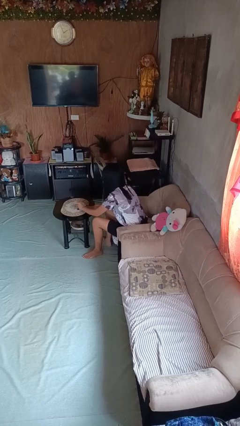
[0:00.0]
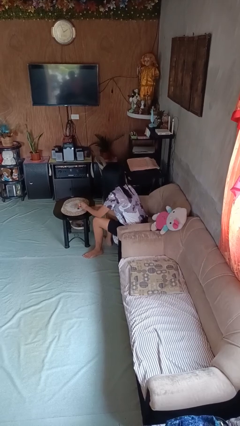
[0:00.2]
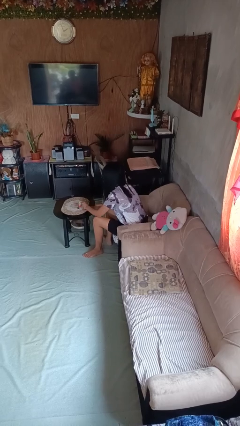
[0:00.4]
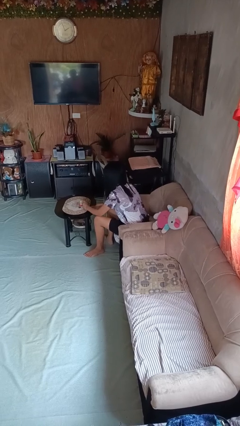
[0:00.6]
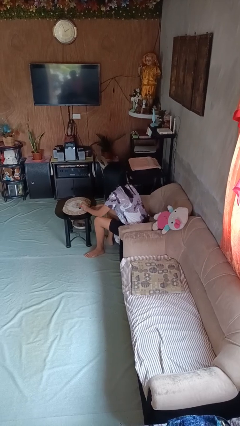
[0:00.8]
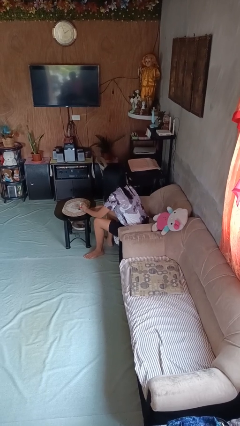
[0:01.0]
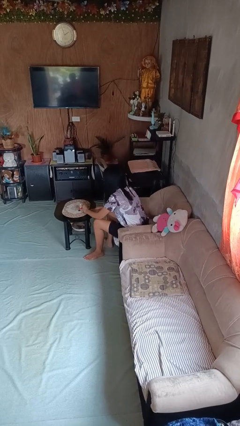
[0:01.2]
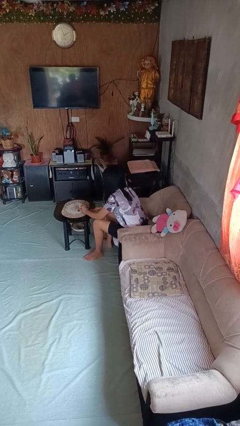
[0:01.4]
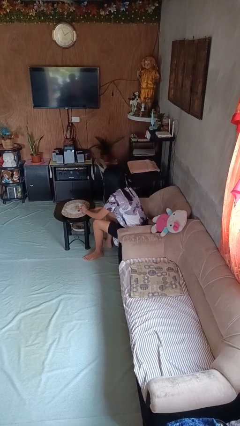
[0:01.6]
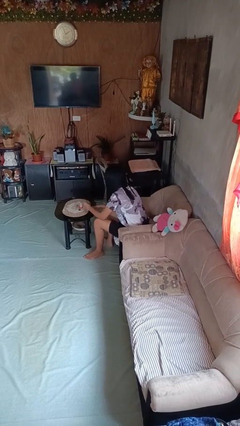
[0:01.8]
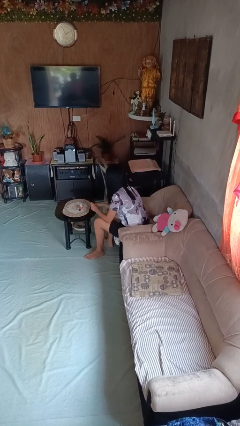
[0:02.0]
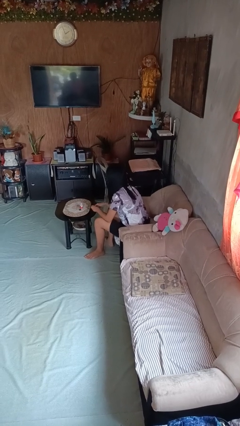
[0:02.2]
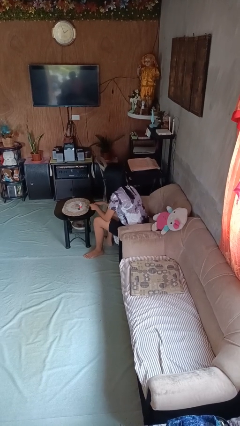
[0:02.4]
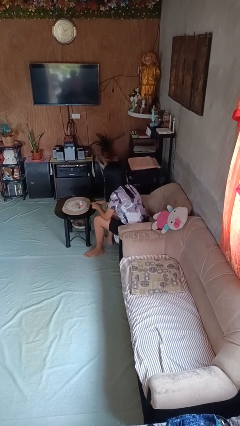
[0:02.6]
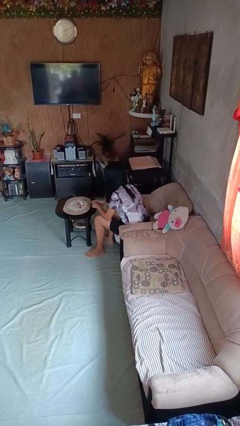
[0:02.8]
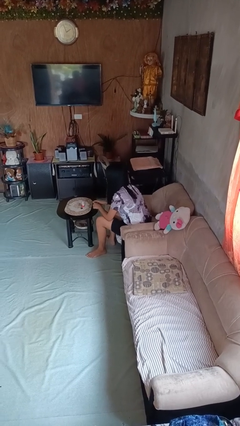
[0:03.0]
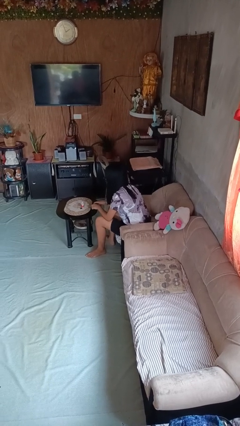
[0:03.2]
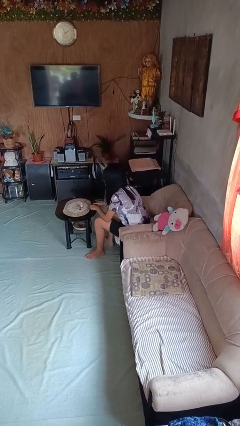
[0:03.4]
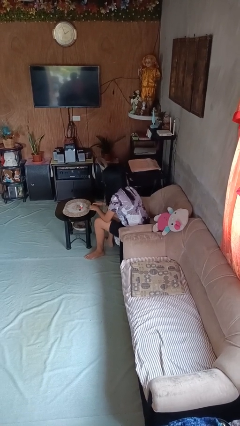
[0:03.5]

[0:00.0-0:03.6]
person paints fingernails

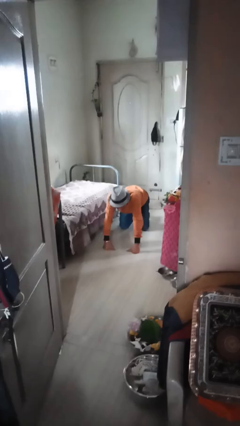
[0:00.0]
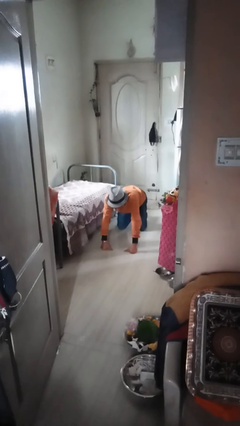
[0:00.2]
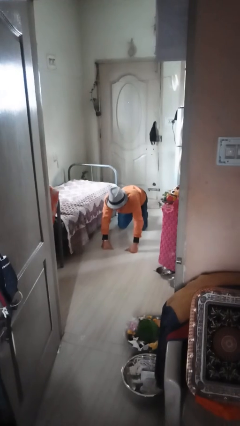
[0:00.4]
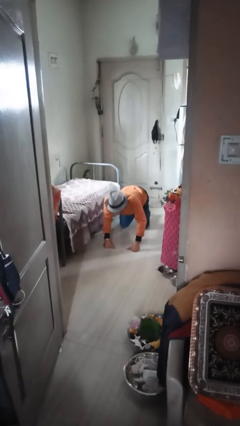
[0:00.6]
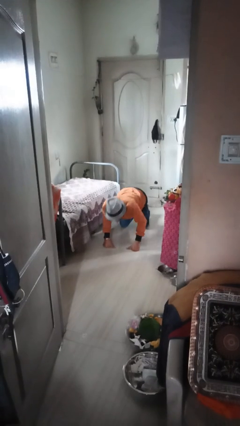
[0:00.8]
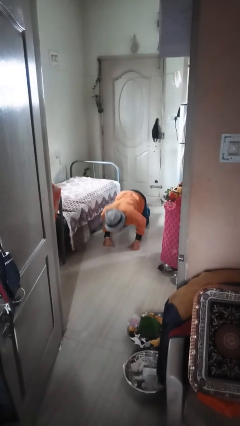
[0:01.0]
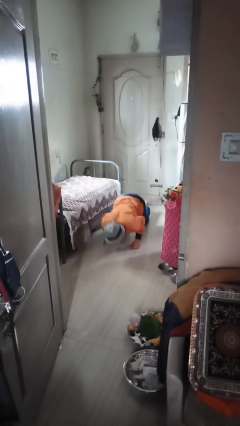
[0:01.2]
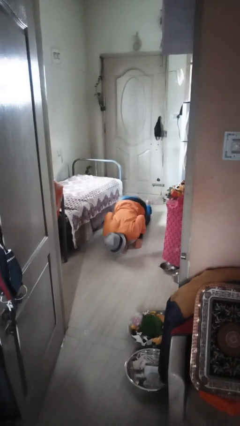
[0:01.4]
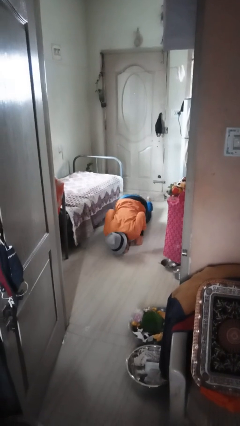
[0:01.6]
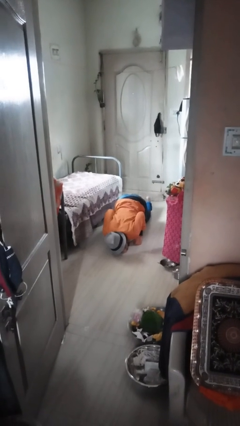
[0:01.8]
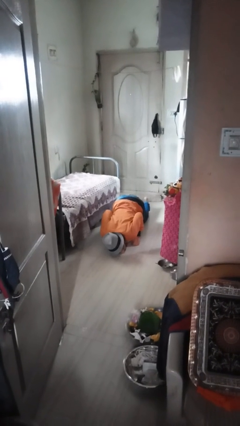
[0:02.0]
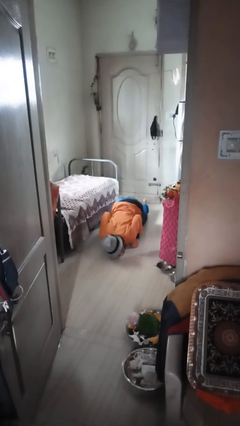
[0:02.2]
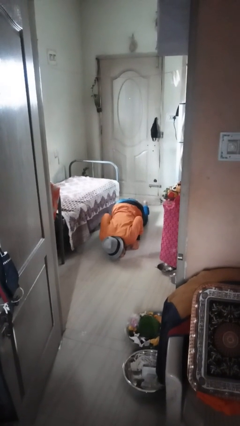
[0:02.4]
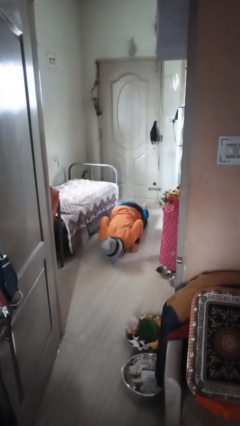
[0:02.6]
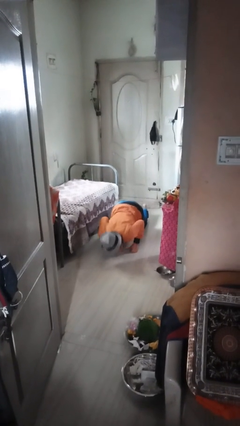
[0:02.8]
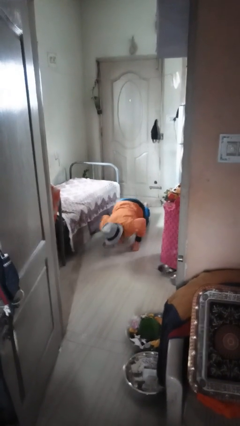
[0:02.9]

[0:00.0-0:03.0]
person exercises with pushup

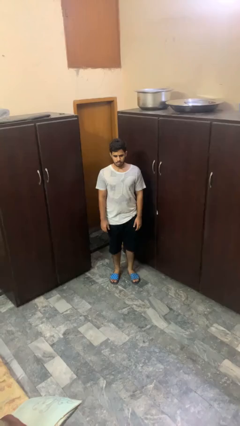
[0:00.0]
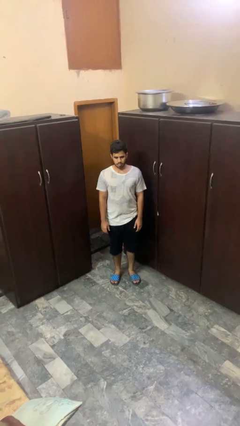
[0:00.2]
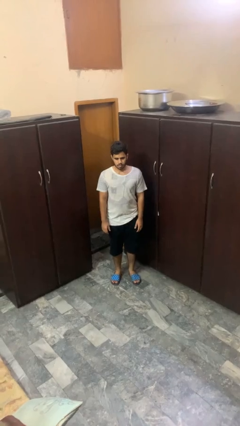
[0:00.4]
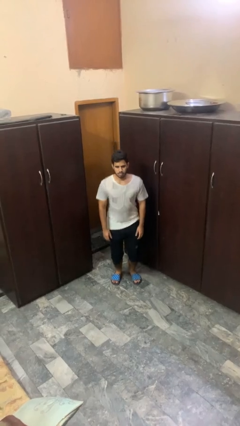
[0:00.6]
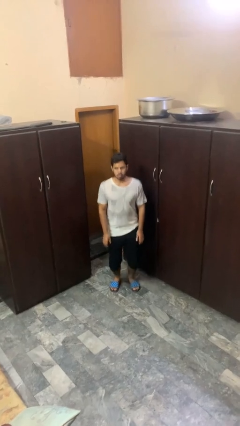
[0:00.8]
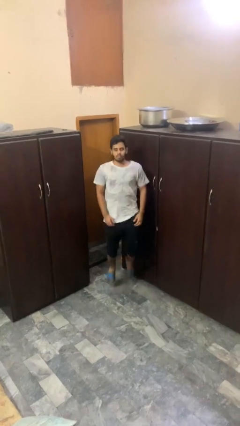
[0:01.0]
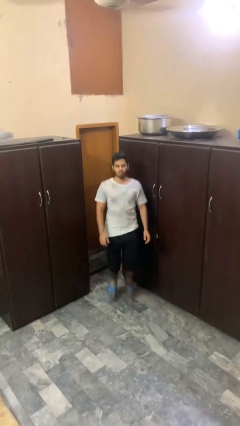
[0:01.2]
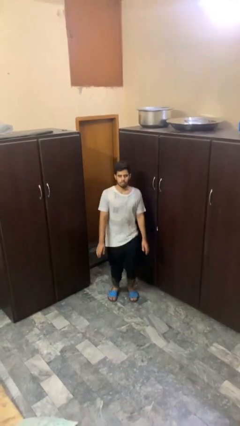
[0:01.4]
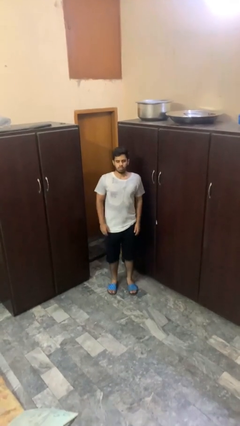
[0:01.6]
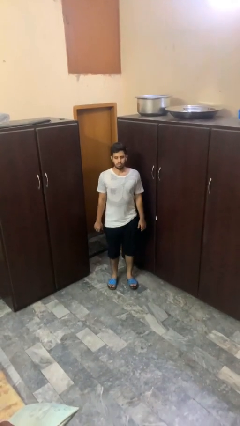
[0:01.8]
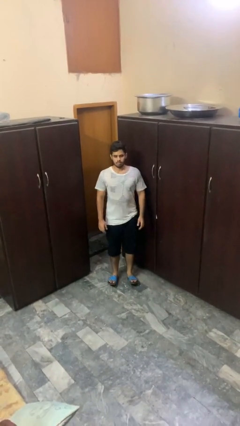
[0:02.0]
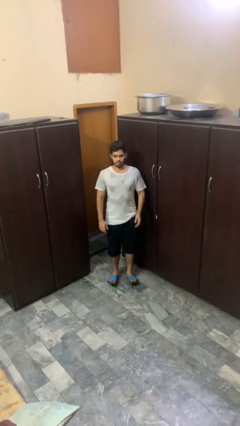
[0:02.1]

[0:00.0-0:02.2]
person jumps

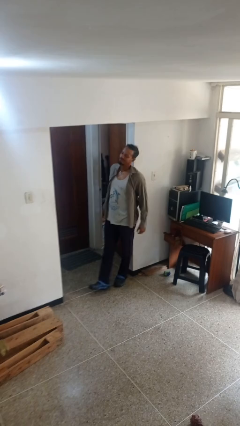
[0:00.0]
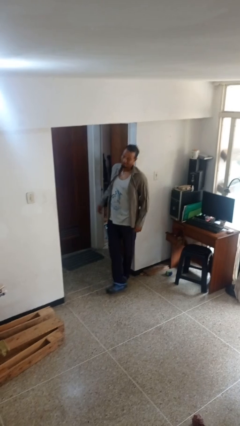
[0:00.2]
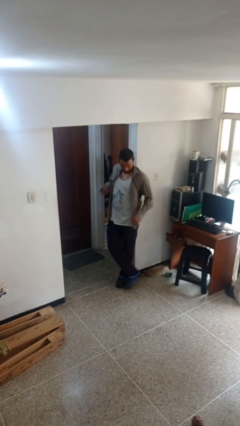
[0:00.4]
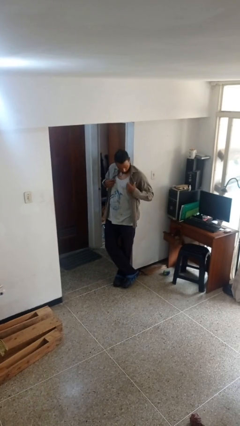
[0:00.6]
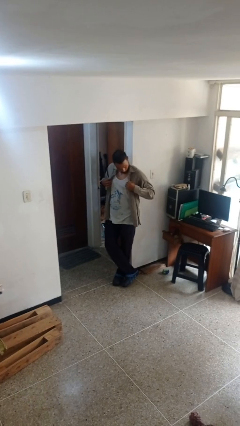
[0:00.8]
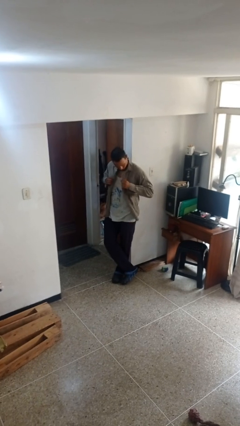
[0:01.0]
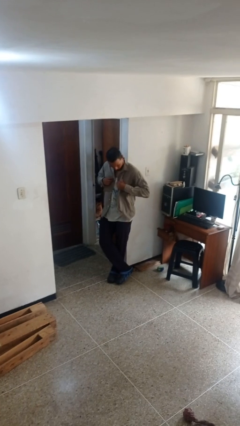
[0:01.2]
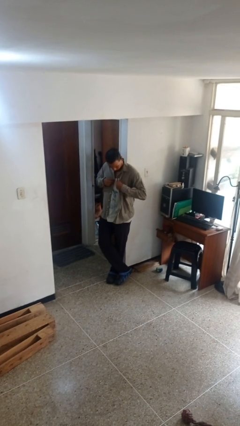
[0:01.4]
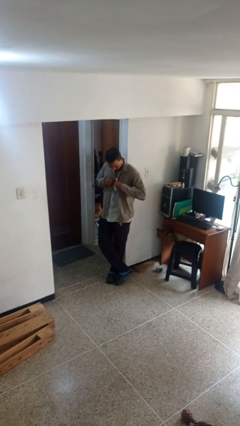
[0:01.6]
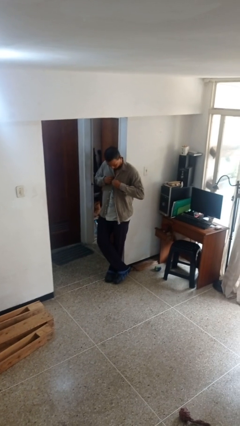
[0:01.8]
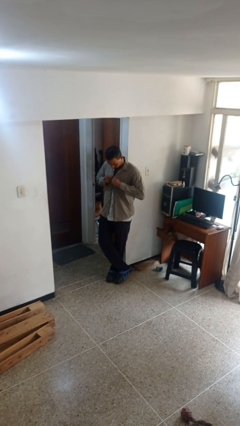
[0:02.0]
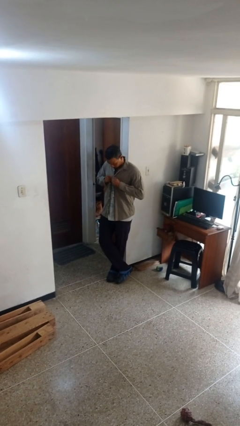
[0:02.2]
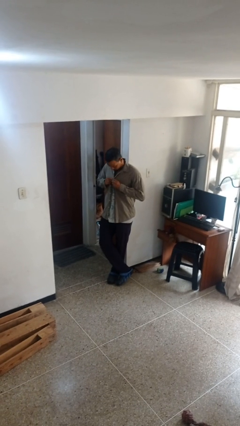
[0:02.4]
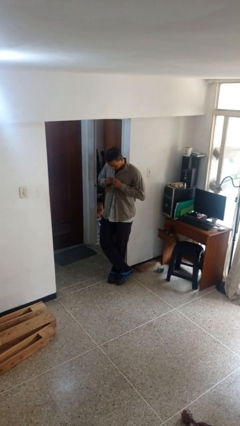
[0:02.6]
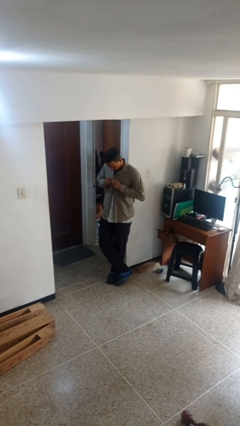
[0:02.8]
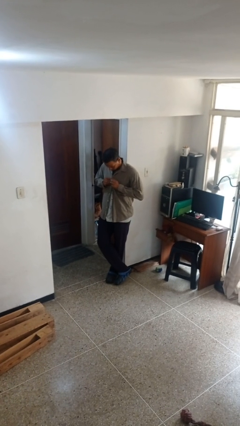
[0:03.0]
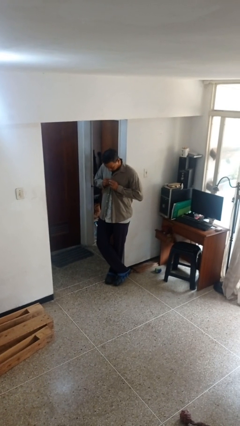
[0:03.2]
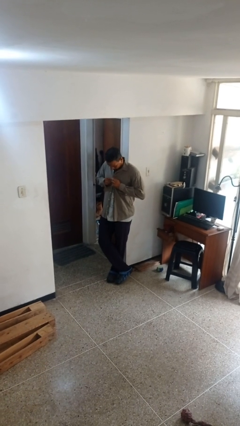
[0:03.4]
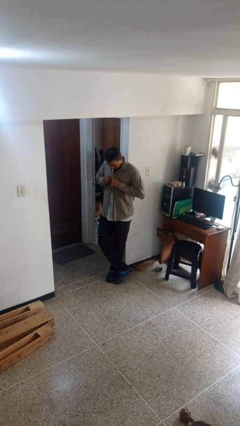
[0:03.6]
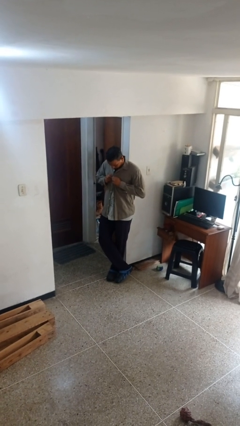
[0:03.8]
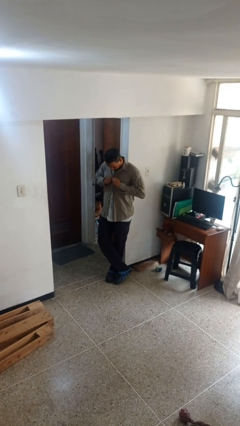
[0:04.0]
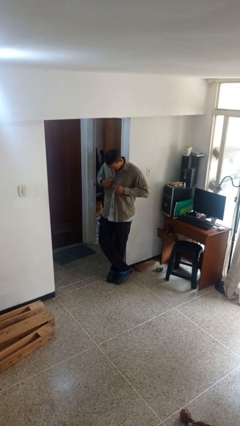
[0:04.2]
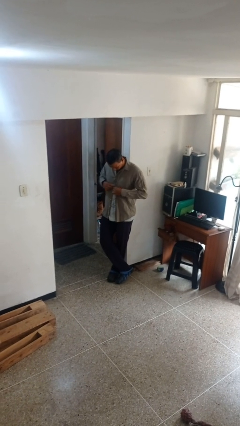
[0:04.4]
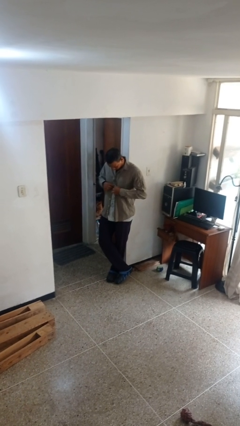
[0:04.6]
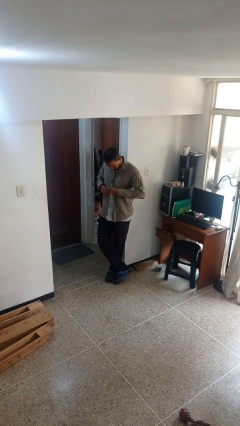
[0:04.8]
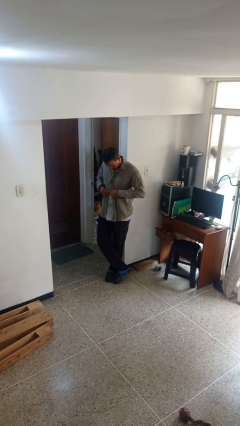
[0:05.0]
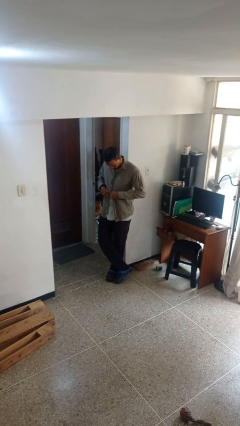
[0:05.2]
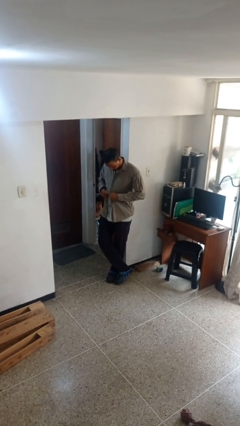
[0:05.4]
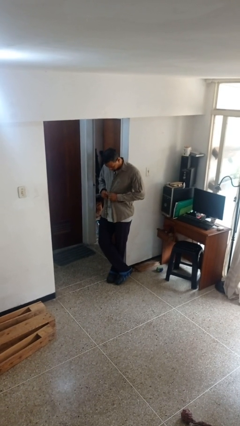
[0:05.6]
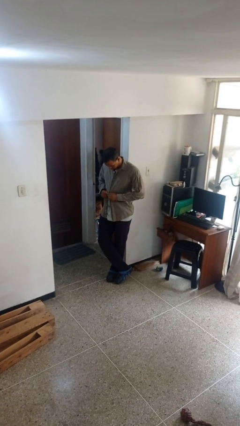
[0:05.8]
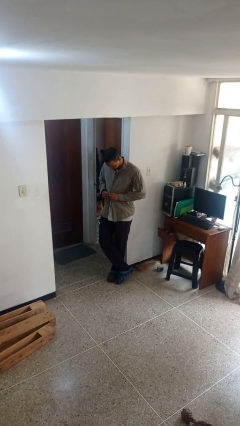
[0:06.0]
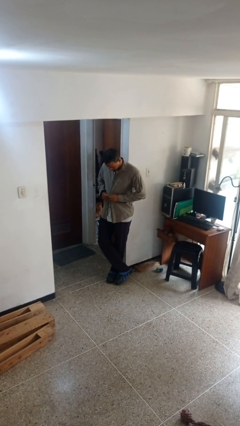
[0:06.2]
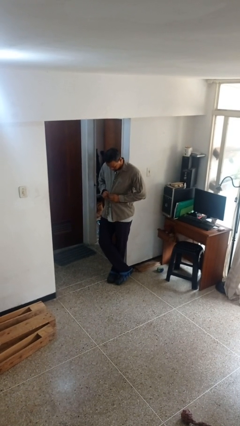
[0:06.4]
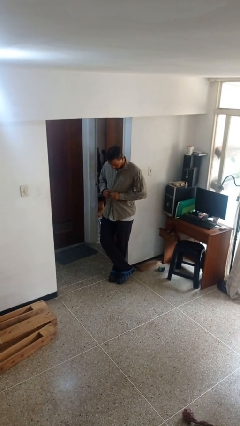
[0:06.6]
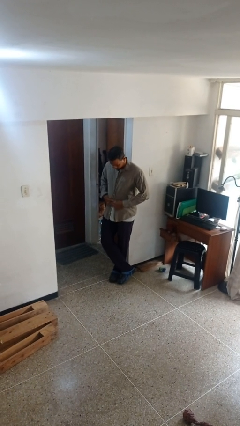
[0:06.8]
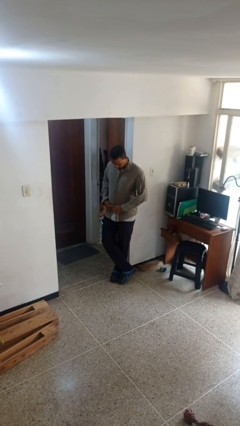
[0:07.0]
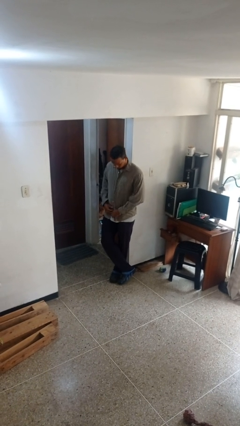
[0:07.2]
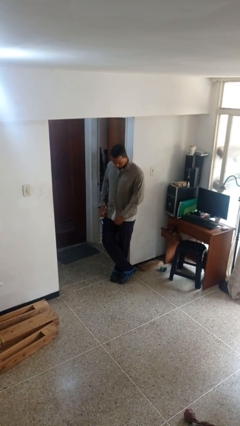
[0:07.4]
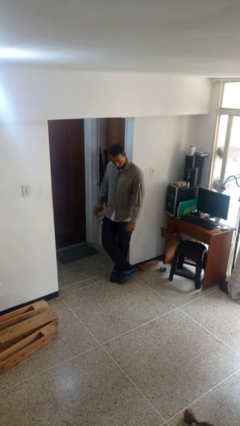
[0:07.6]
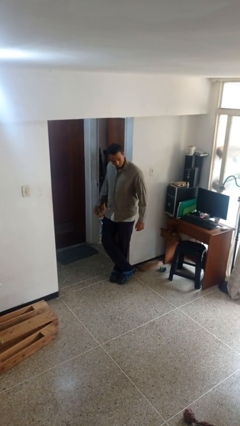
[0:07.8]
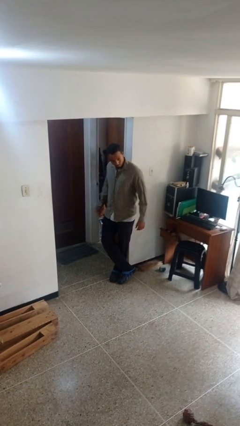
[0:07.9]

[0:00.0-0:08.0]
person buttons shirt

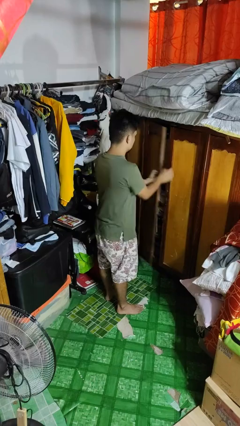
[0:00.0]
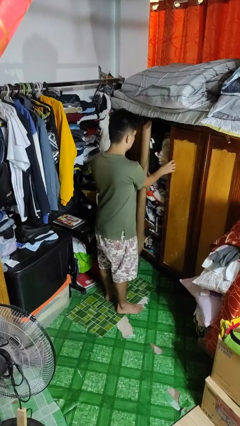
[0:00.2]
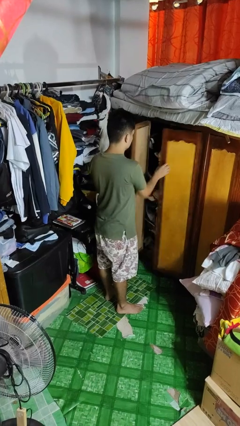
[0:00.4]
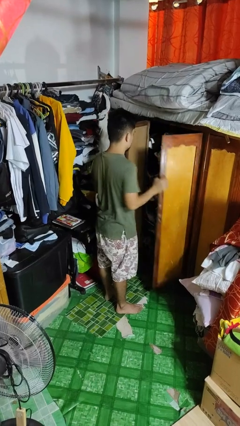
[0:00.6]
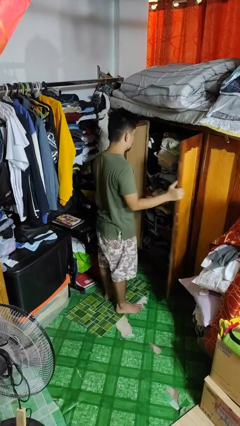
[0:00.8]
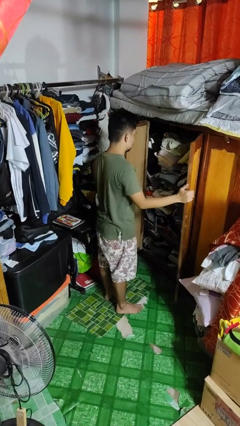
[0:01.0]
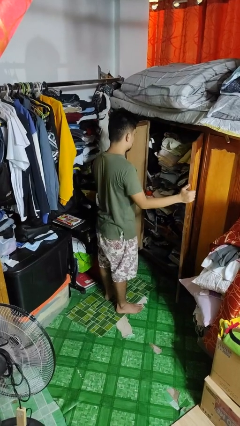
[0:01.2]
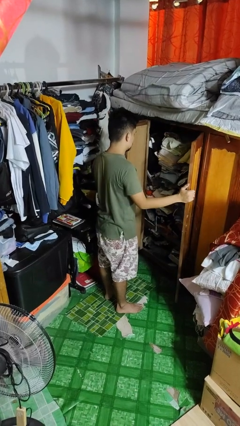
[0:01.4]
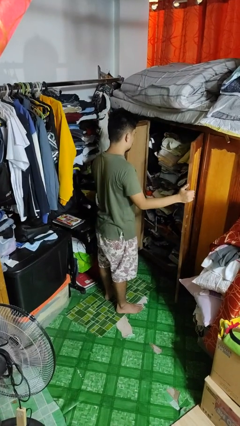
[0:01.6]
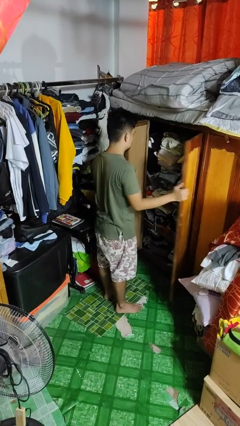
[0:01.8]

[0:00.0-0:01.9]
person opens closet door
